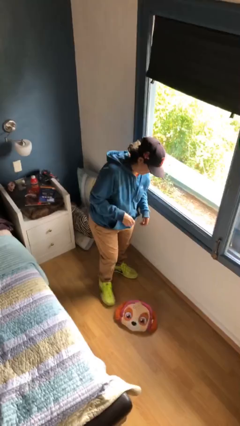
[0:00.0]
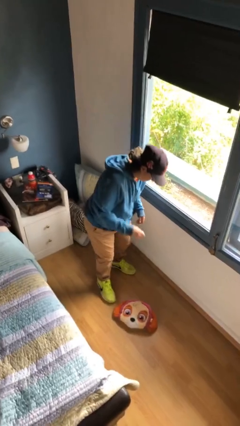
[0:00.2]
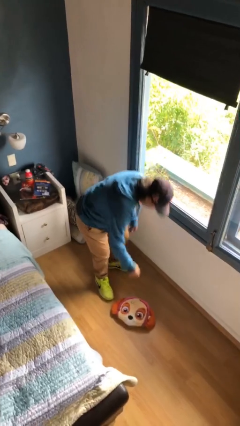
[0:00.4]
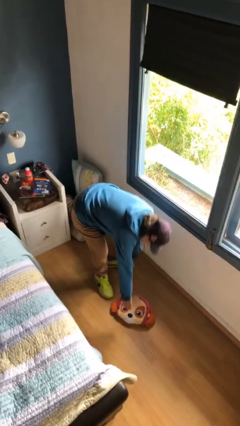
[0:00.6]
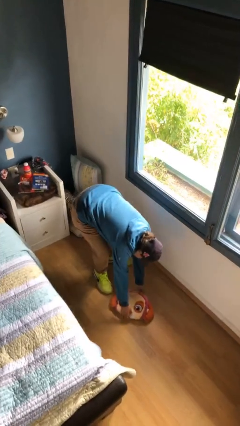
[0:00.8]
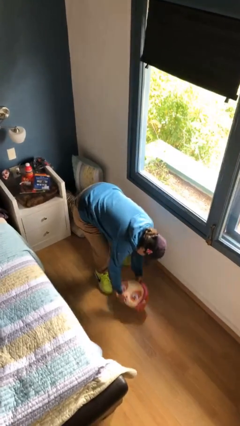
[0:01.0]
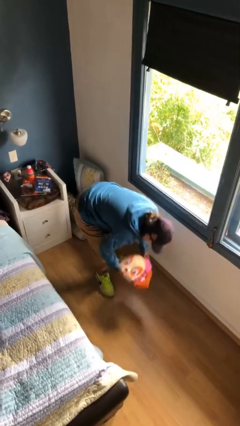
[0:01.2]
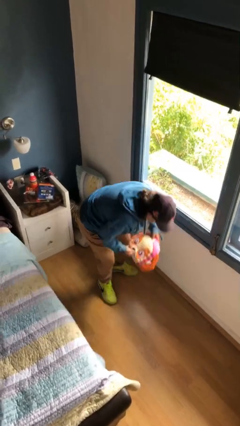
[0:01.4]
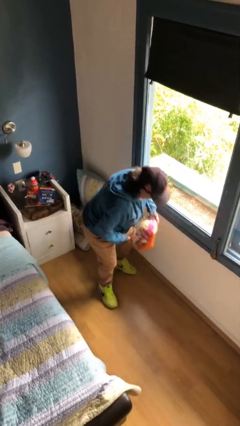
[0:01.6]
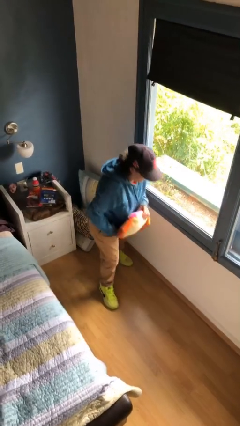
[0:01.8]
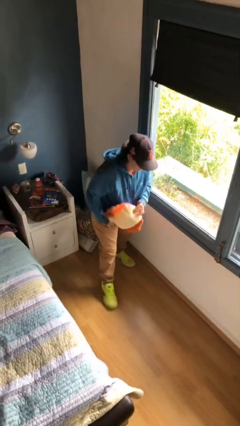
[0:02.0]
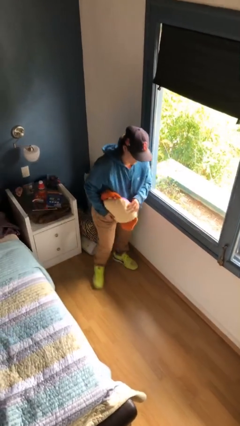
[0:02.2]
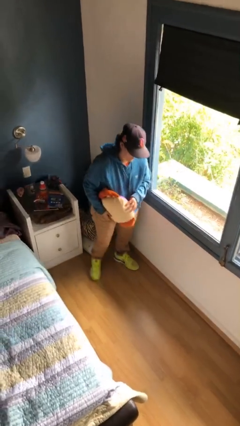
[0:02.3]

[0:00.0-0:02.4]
person picks up object from floor

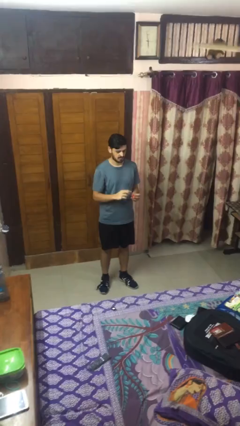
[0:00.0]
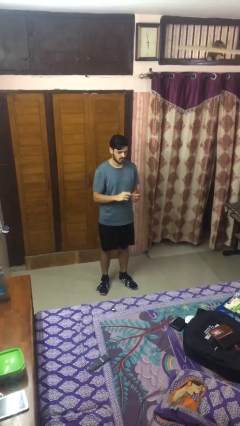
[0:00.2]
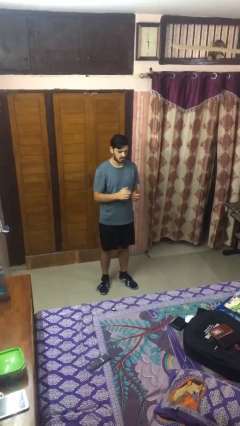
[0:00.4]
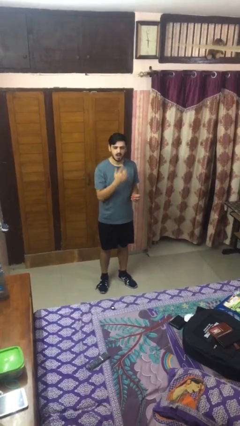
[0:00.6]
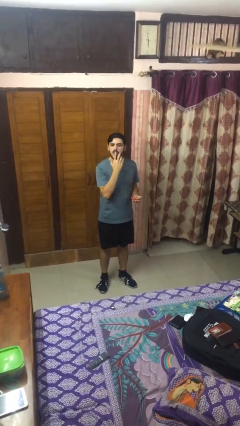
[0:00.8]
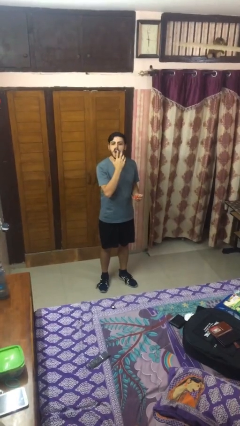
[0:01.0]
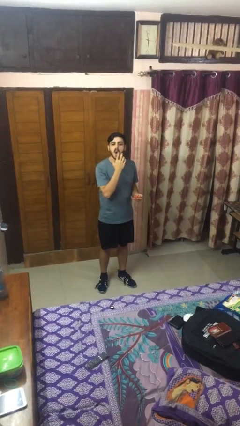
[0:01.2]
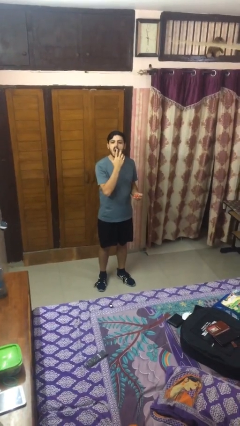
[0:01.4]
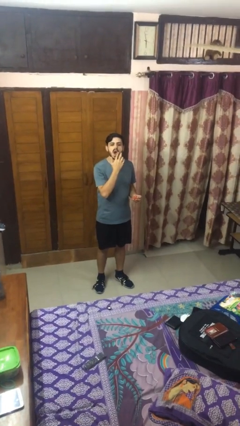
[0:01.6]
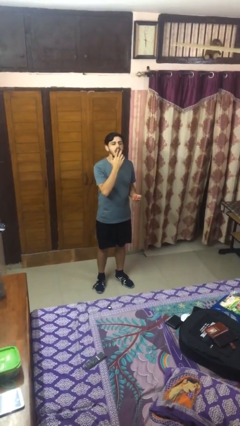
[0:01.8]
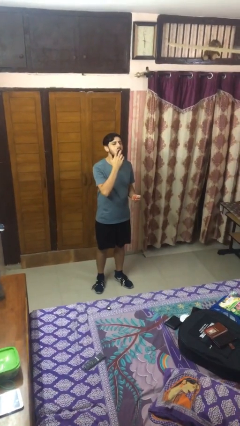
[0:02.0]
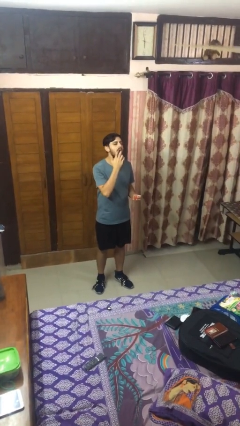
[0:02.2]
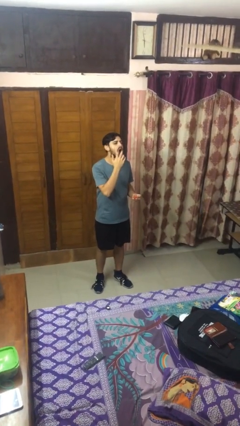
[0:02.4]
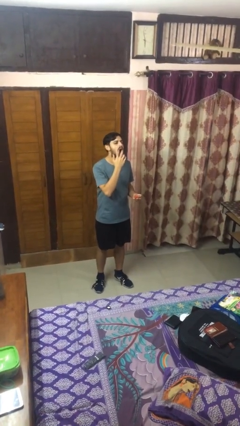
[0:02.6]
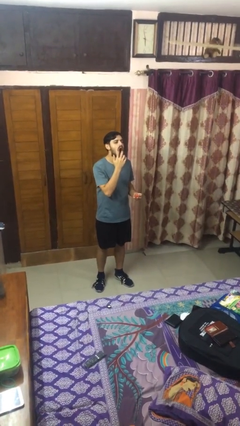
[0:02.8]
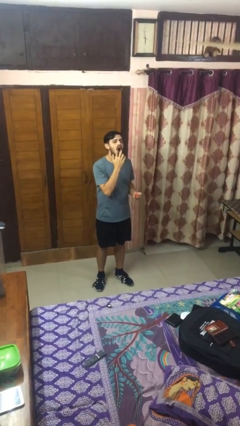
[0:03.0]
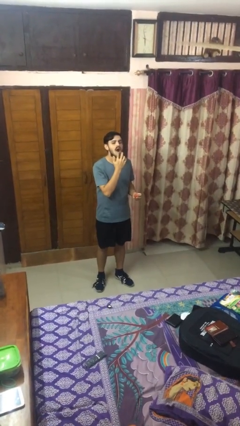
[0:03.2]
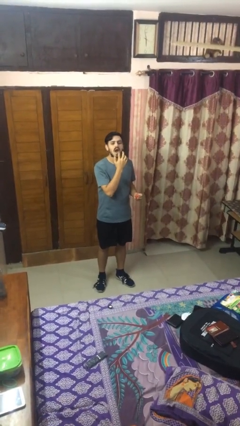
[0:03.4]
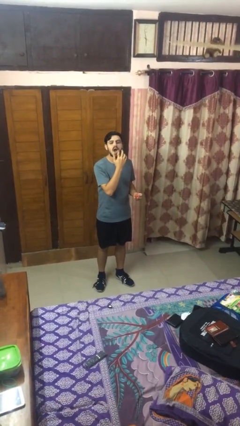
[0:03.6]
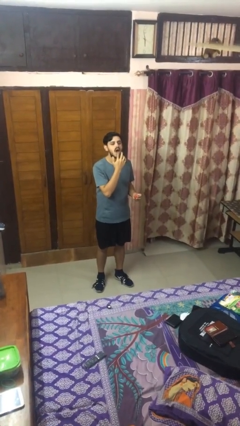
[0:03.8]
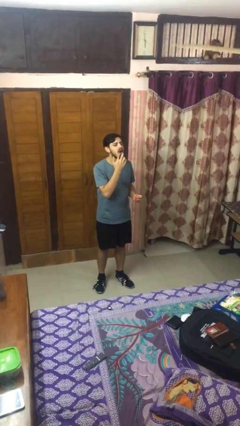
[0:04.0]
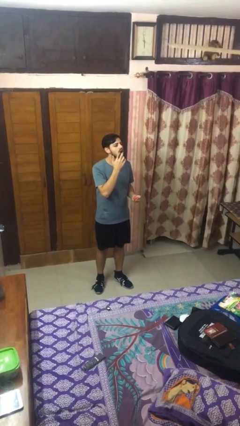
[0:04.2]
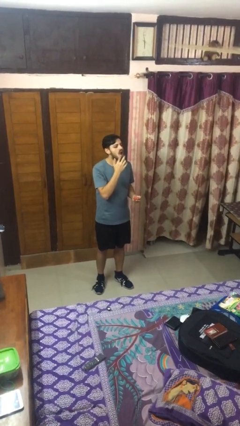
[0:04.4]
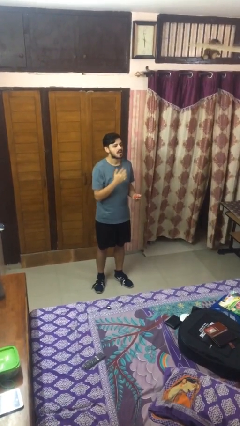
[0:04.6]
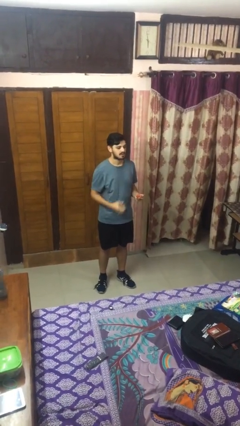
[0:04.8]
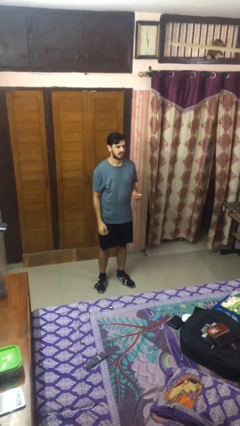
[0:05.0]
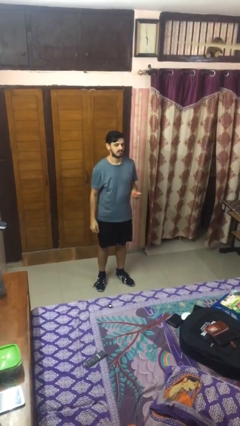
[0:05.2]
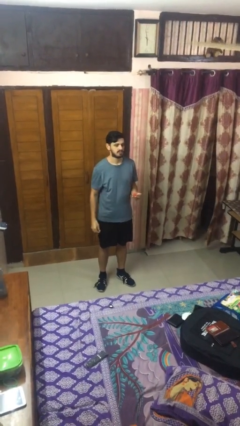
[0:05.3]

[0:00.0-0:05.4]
person applies lip makeup

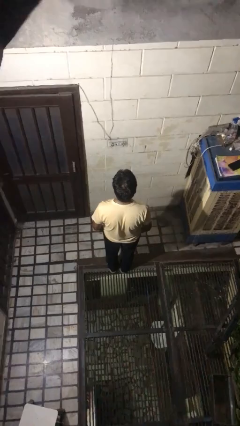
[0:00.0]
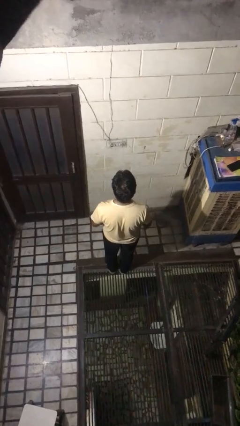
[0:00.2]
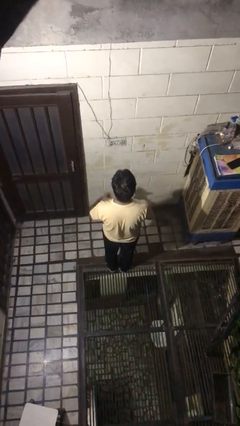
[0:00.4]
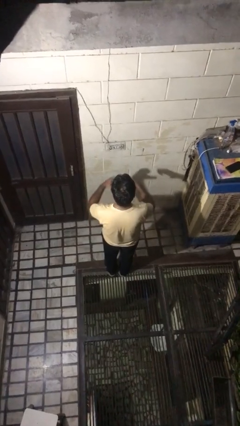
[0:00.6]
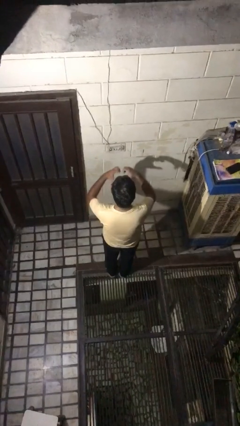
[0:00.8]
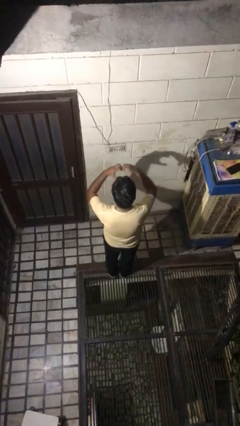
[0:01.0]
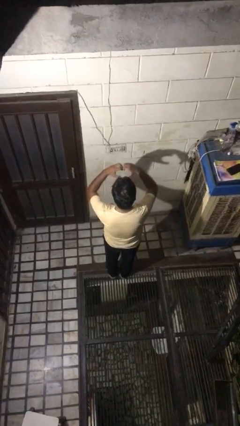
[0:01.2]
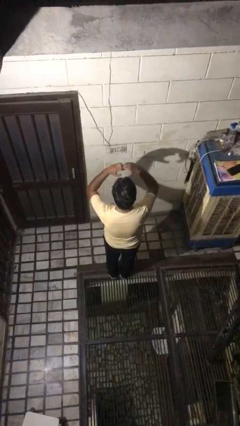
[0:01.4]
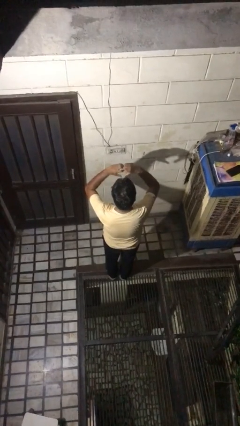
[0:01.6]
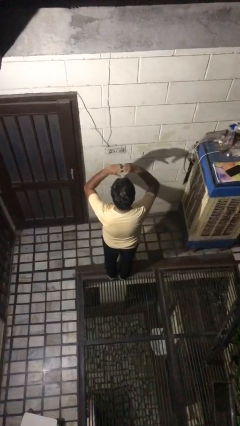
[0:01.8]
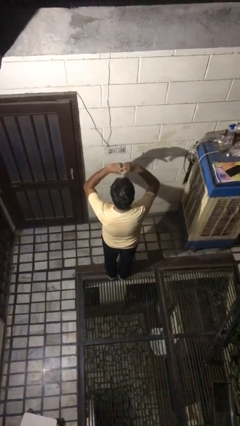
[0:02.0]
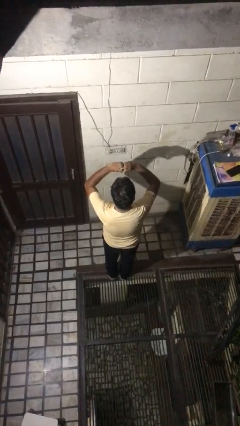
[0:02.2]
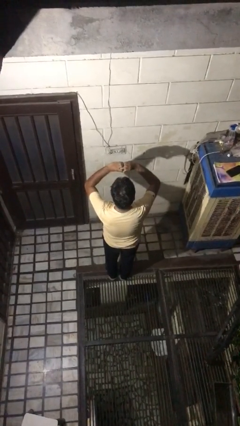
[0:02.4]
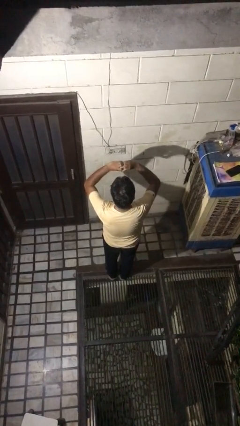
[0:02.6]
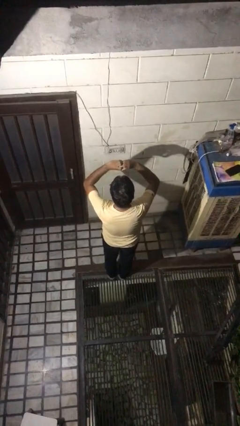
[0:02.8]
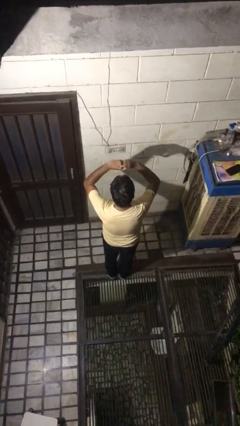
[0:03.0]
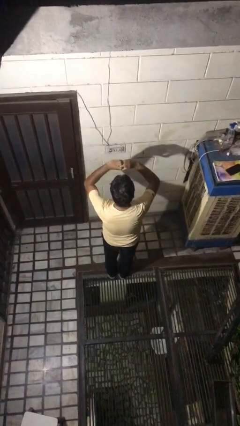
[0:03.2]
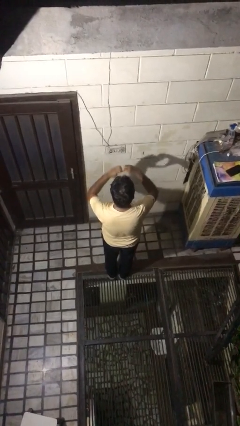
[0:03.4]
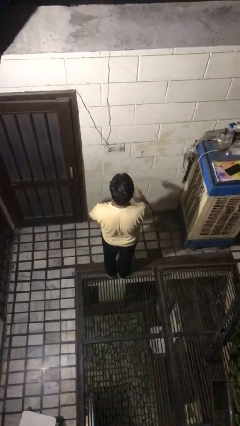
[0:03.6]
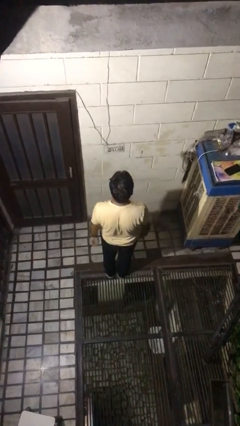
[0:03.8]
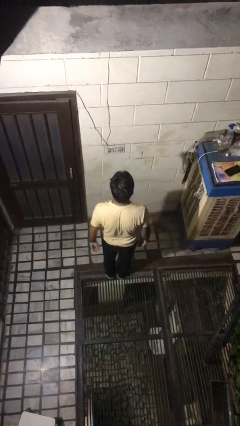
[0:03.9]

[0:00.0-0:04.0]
person gestures heart

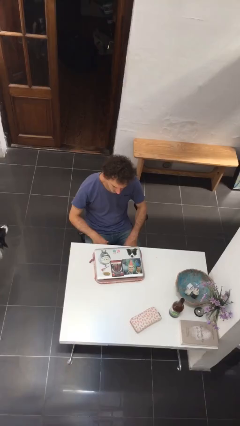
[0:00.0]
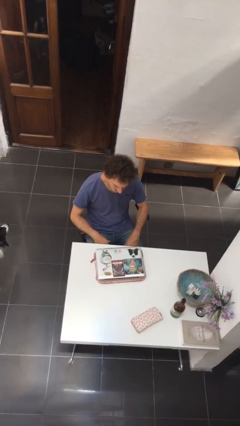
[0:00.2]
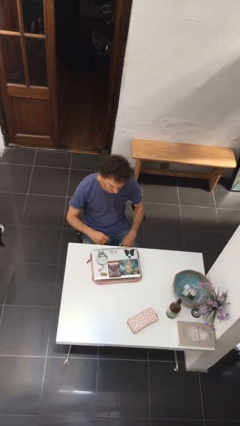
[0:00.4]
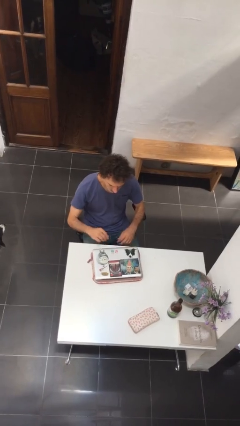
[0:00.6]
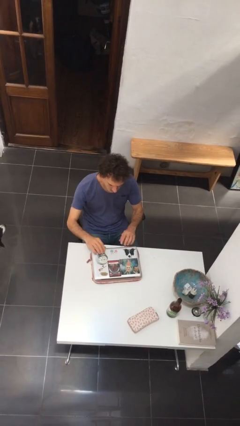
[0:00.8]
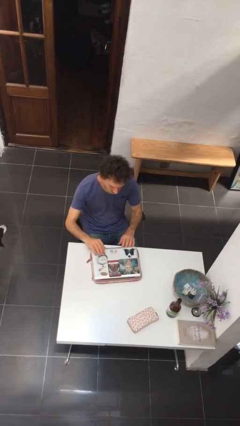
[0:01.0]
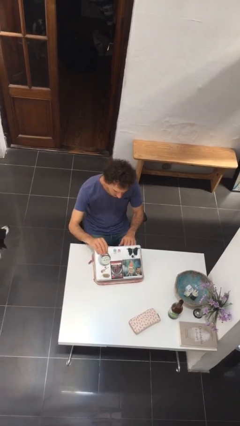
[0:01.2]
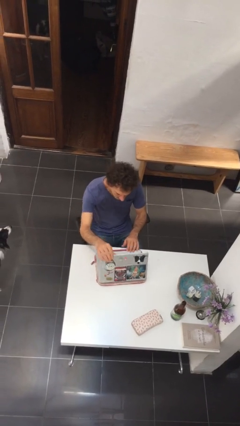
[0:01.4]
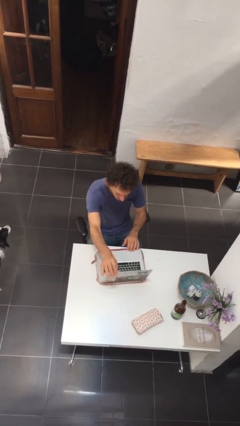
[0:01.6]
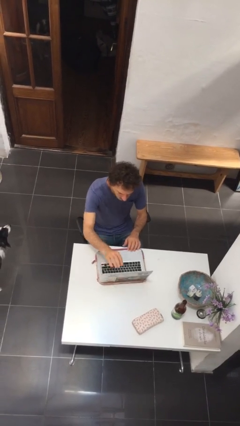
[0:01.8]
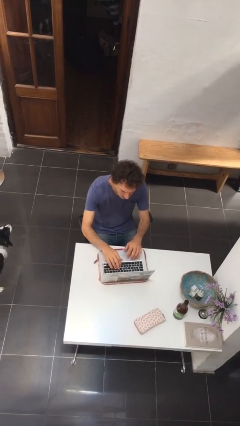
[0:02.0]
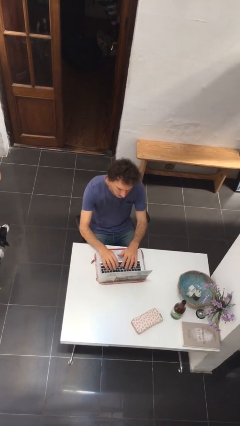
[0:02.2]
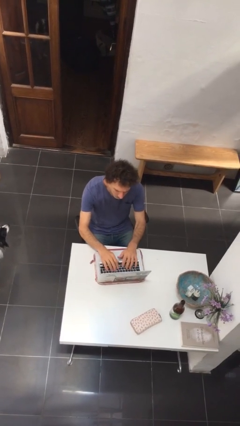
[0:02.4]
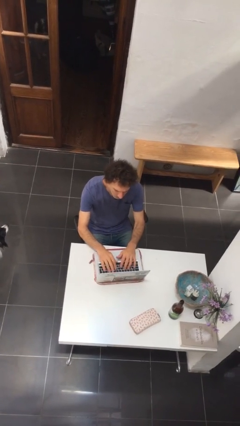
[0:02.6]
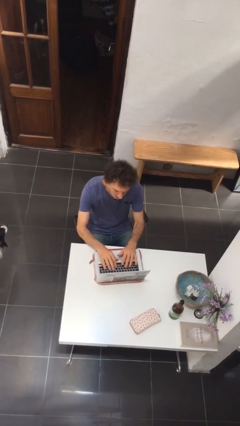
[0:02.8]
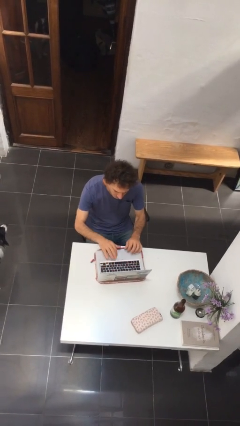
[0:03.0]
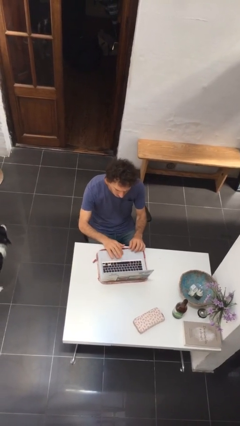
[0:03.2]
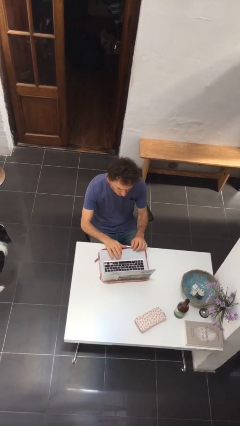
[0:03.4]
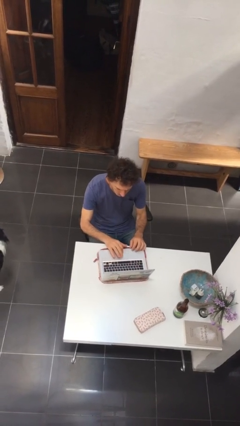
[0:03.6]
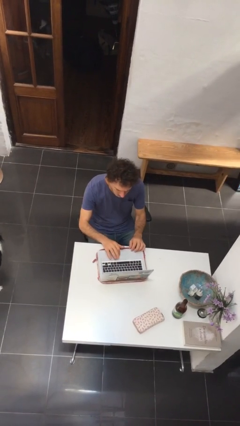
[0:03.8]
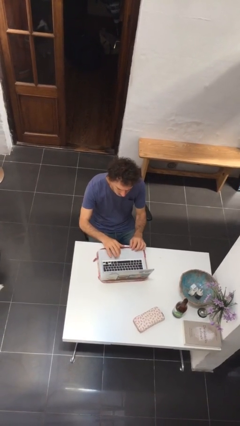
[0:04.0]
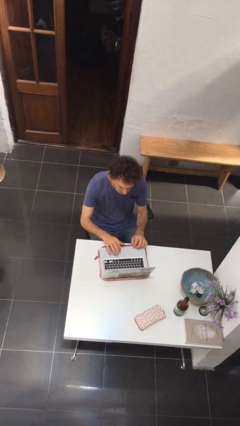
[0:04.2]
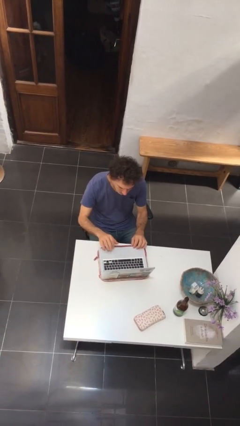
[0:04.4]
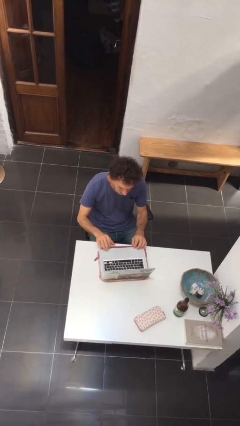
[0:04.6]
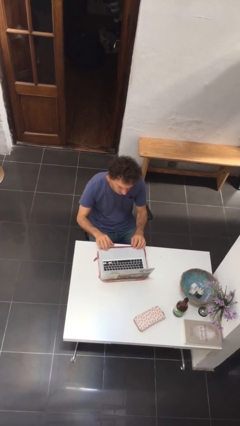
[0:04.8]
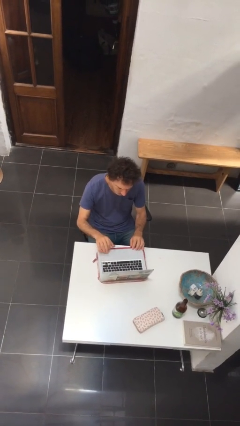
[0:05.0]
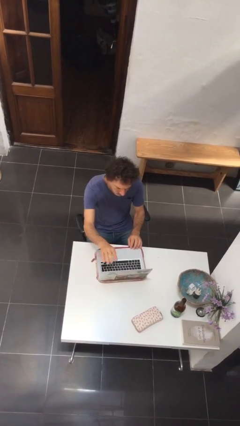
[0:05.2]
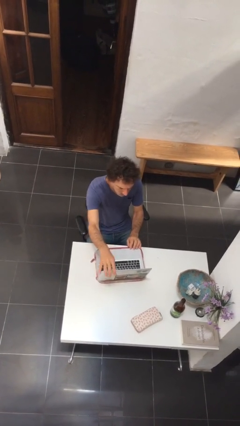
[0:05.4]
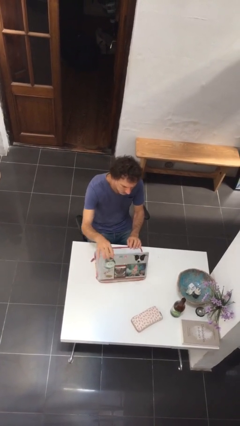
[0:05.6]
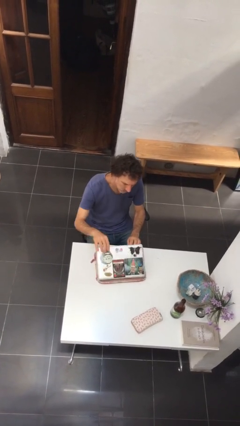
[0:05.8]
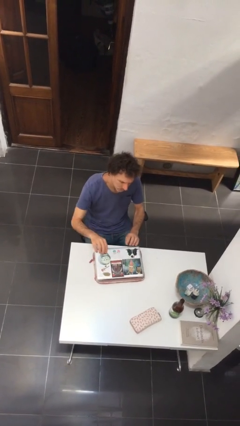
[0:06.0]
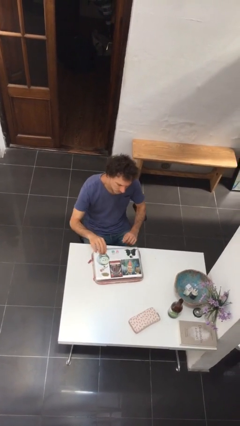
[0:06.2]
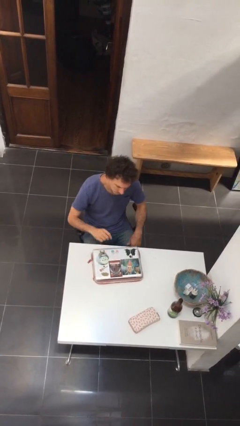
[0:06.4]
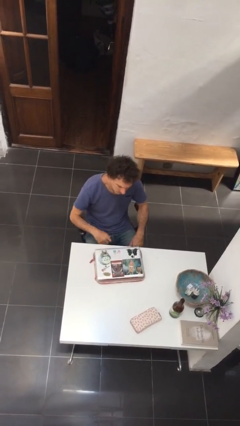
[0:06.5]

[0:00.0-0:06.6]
person interacts with laptop
